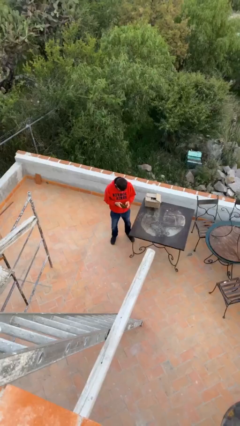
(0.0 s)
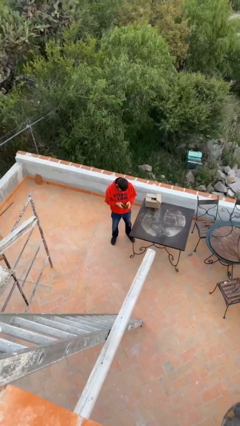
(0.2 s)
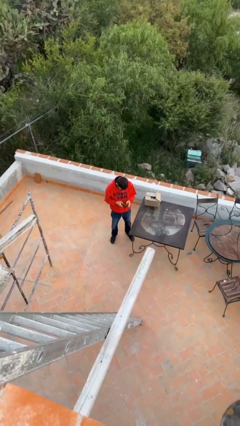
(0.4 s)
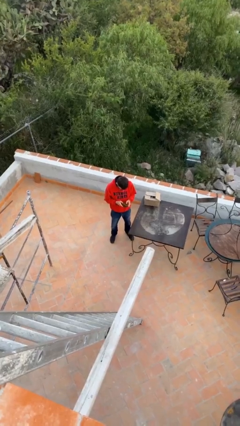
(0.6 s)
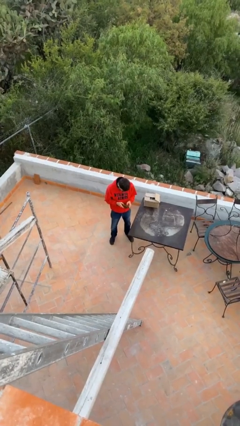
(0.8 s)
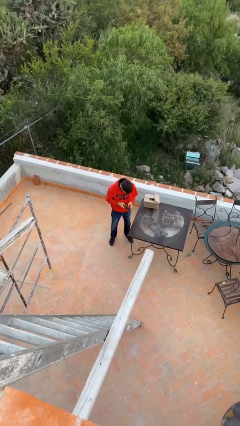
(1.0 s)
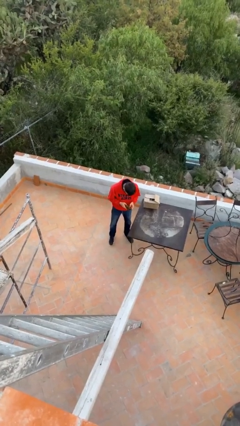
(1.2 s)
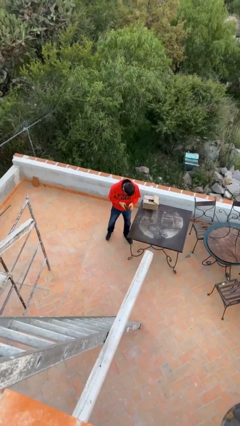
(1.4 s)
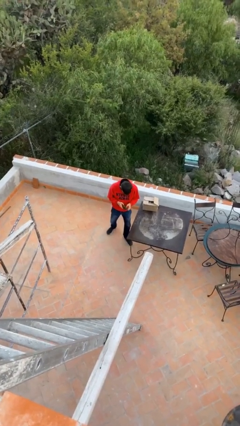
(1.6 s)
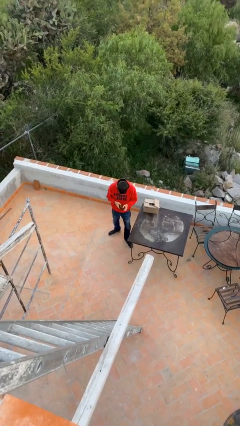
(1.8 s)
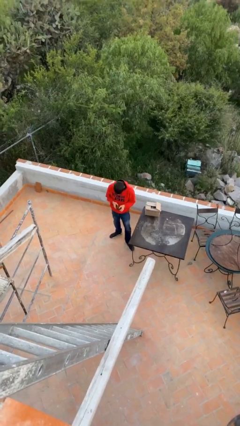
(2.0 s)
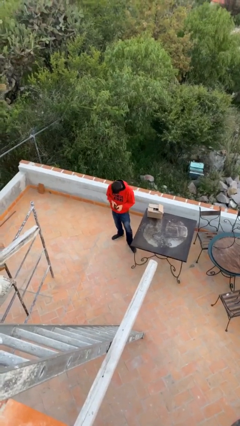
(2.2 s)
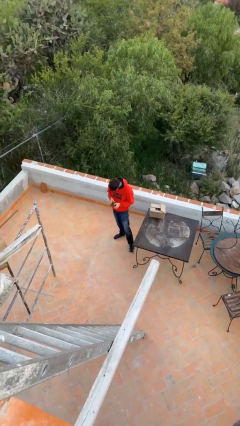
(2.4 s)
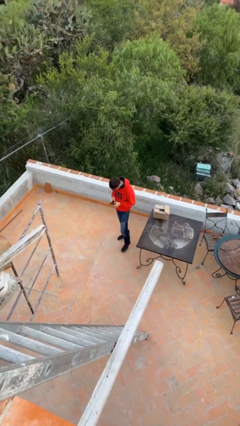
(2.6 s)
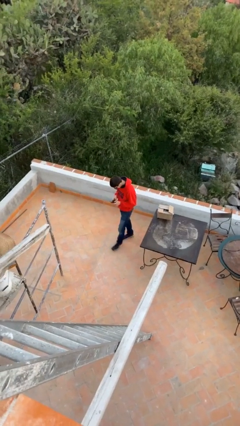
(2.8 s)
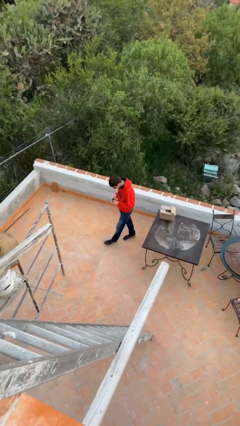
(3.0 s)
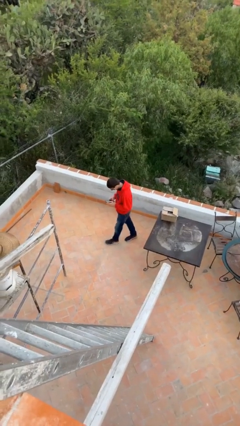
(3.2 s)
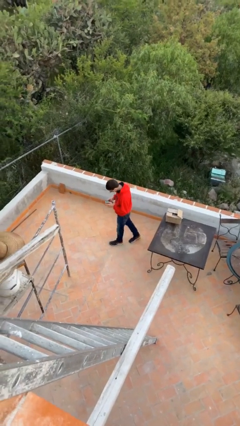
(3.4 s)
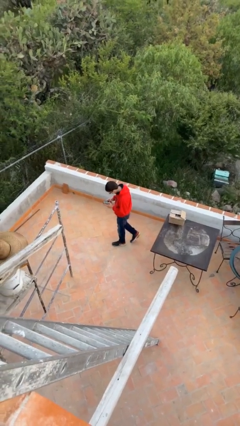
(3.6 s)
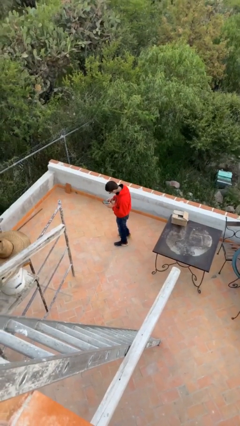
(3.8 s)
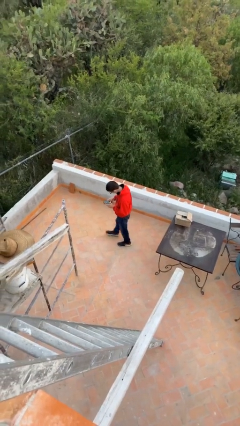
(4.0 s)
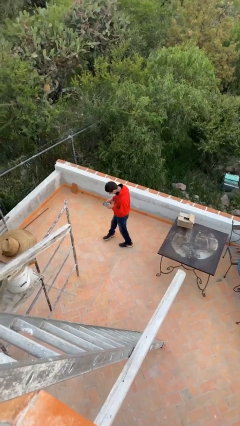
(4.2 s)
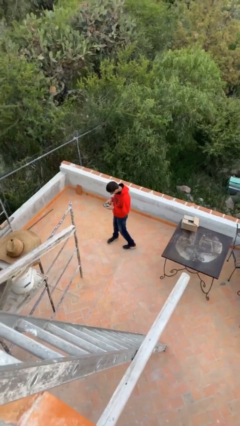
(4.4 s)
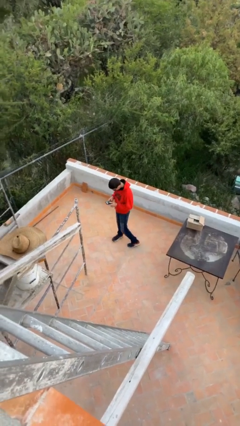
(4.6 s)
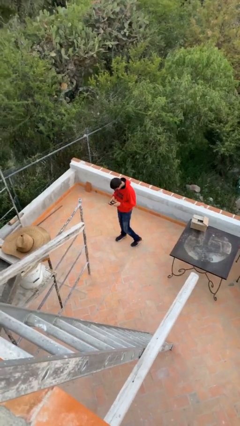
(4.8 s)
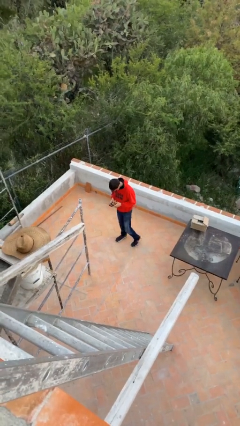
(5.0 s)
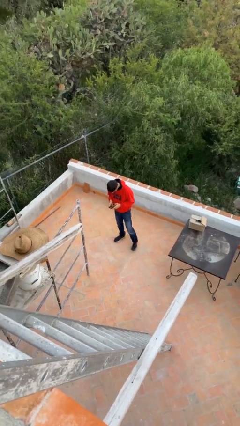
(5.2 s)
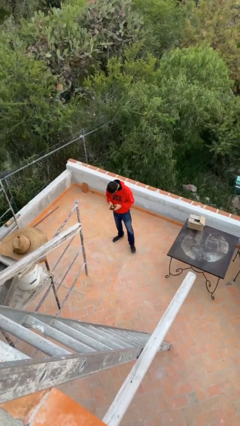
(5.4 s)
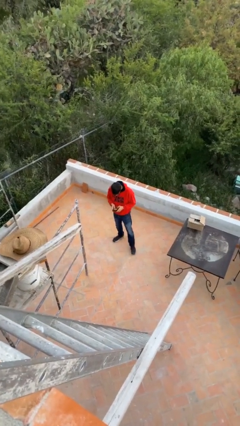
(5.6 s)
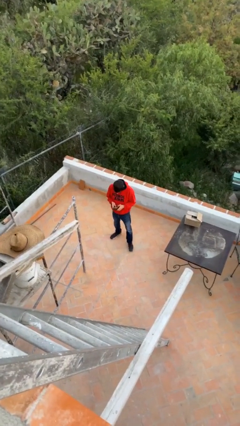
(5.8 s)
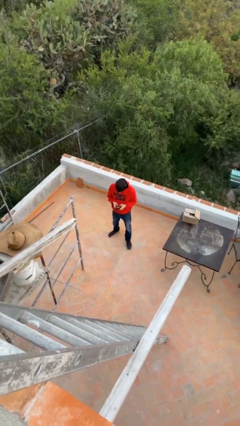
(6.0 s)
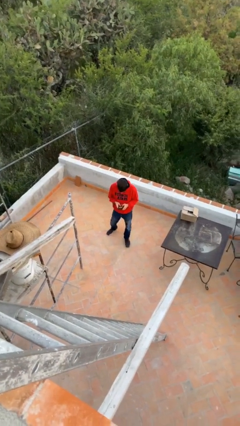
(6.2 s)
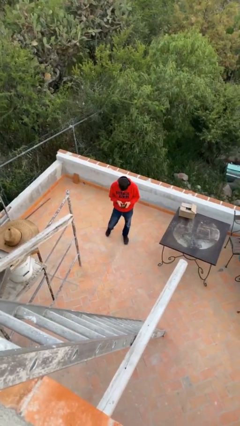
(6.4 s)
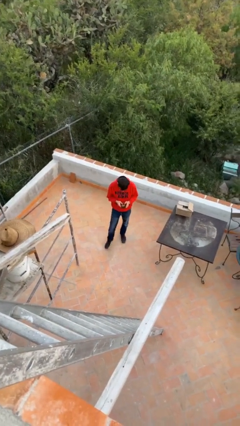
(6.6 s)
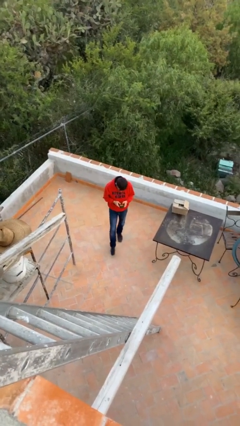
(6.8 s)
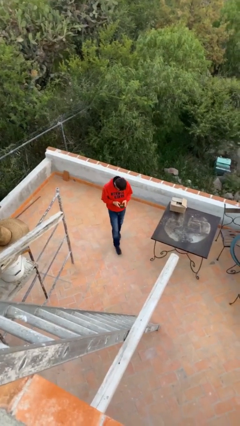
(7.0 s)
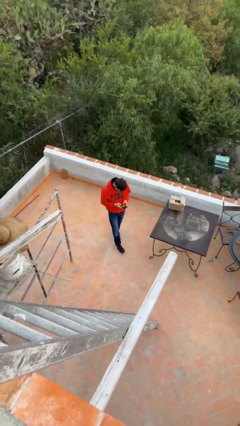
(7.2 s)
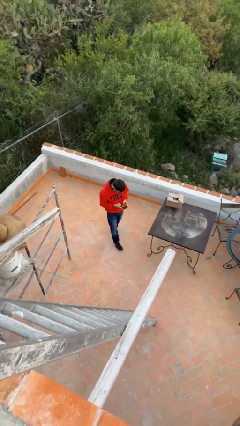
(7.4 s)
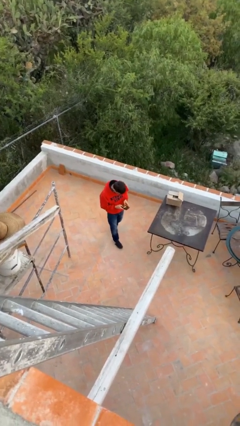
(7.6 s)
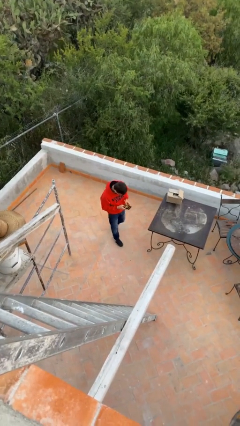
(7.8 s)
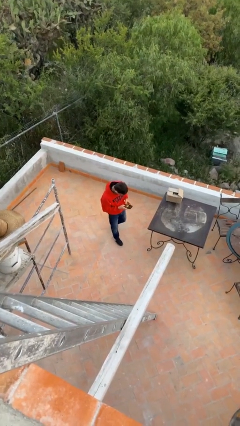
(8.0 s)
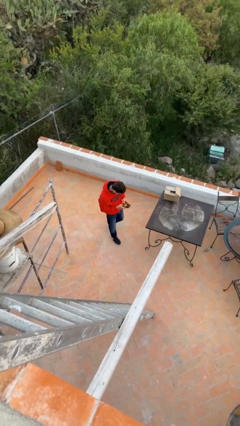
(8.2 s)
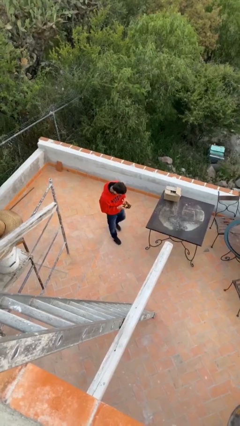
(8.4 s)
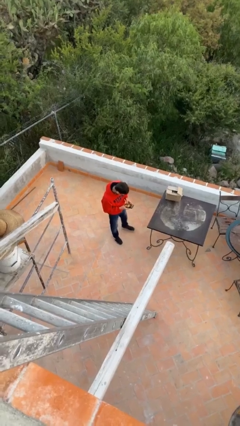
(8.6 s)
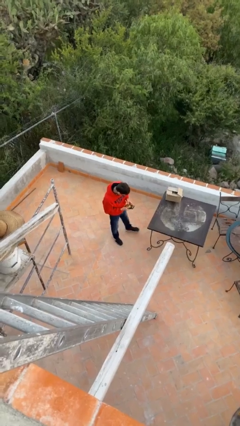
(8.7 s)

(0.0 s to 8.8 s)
person texts on phone

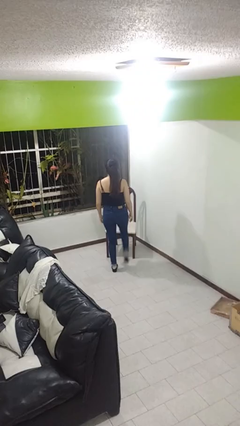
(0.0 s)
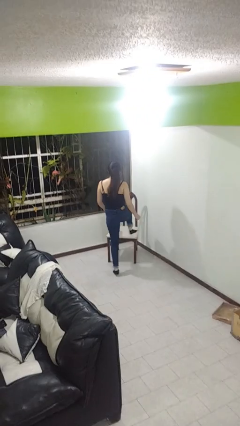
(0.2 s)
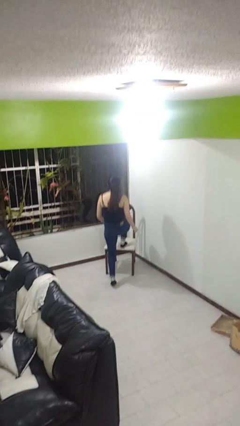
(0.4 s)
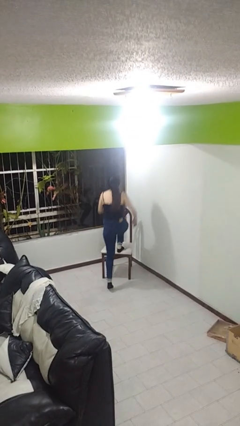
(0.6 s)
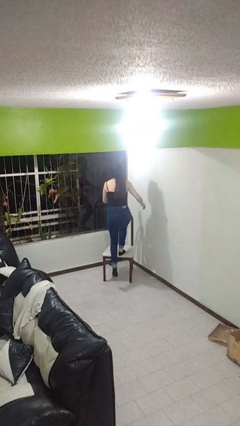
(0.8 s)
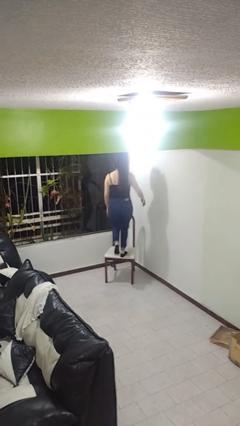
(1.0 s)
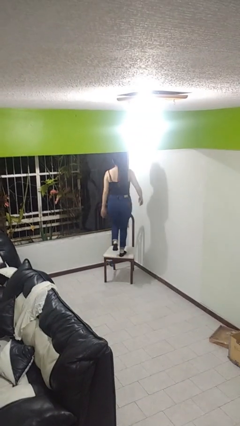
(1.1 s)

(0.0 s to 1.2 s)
person climbs on chair

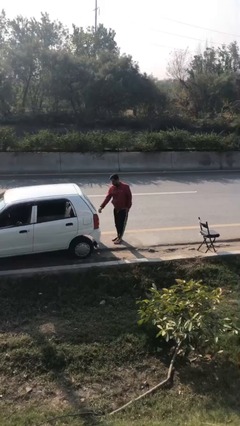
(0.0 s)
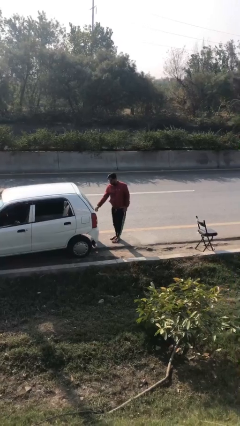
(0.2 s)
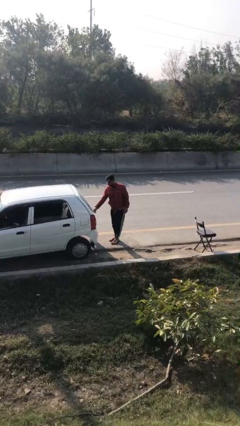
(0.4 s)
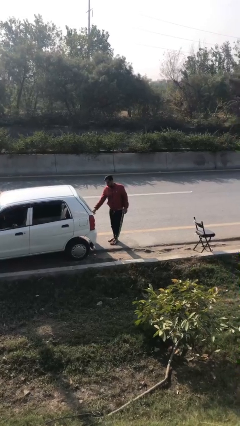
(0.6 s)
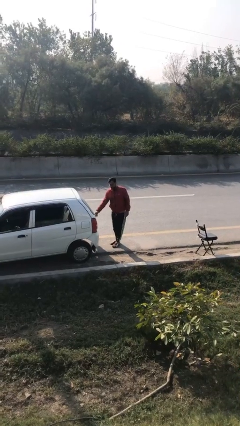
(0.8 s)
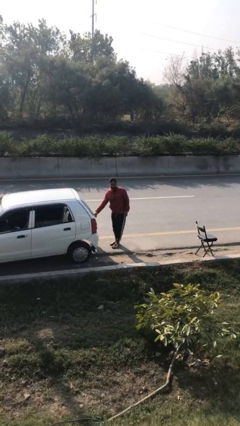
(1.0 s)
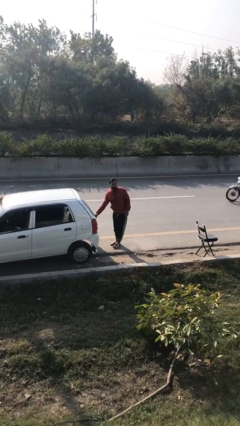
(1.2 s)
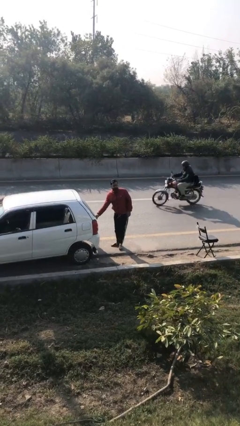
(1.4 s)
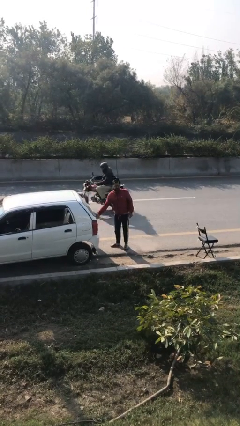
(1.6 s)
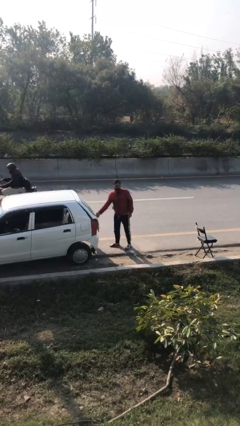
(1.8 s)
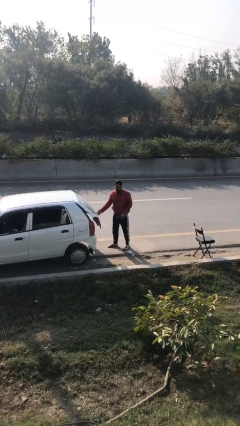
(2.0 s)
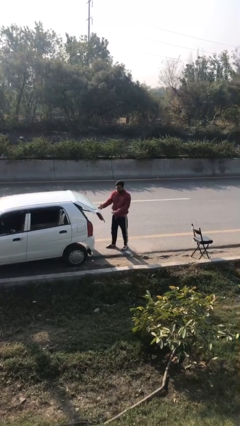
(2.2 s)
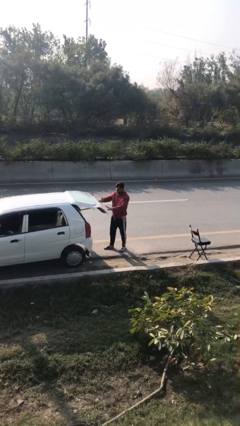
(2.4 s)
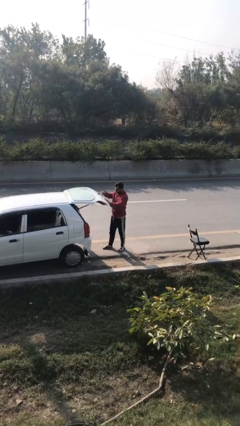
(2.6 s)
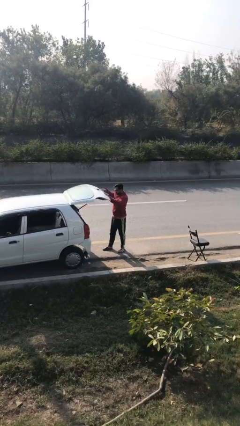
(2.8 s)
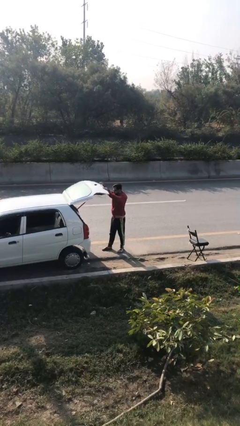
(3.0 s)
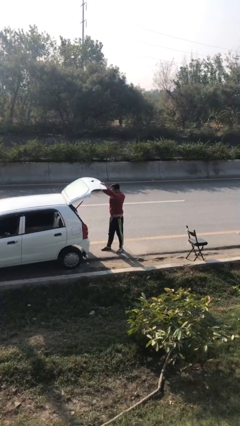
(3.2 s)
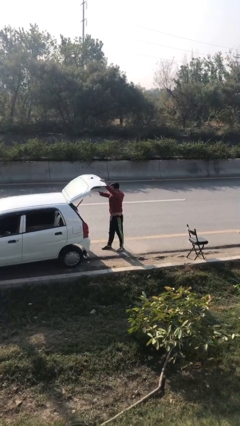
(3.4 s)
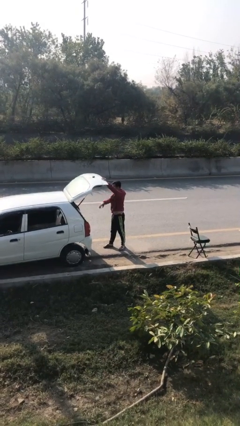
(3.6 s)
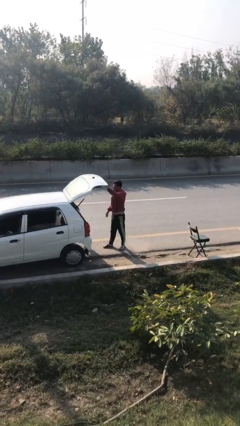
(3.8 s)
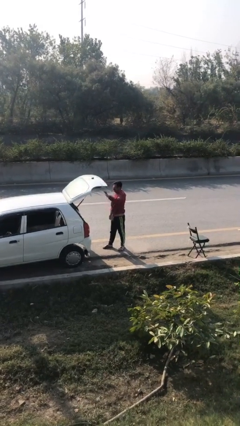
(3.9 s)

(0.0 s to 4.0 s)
person opens car trunk

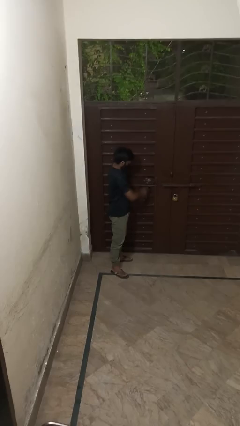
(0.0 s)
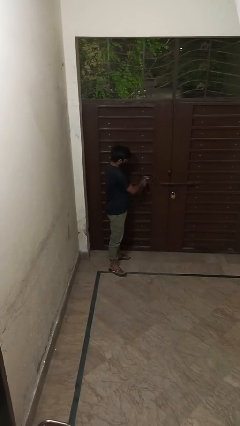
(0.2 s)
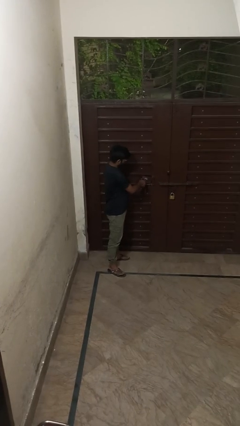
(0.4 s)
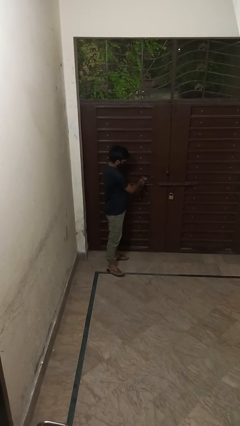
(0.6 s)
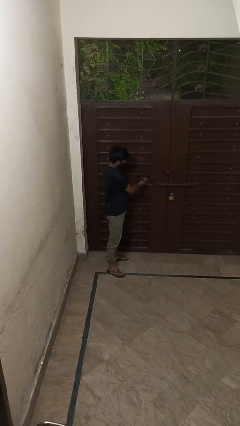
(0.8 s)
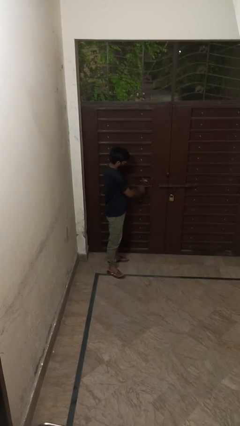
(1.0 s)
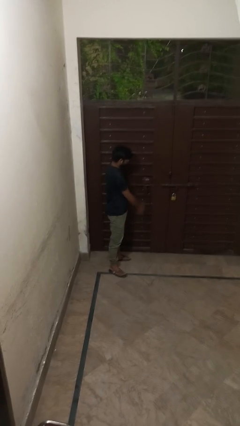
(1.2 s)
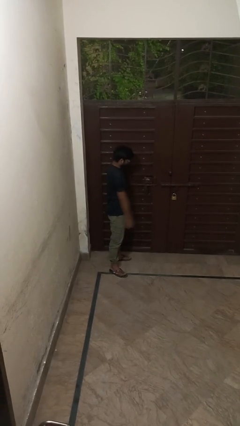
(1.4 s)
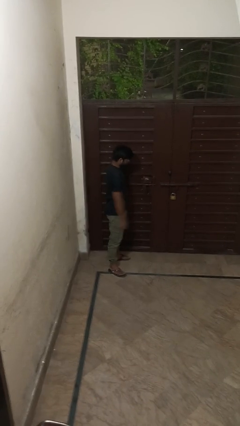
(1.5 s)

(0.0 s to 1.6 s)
person locks door with keys

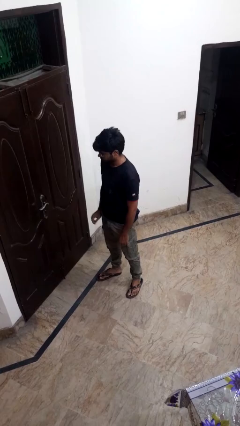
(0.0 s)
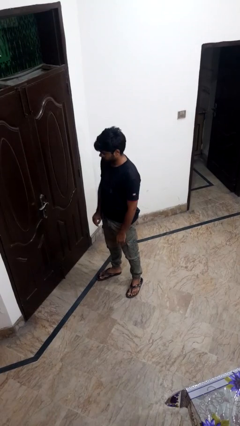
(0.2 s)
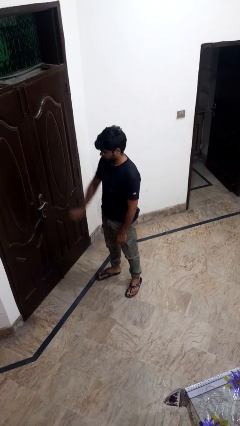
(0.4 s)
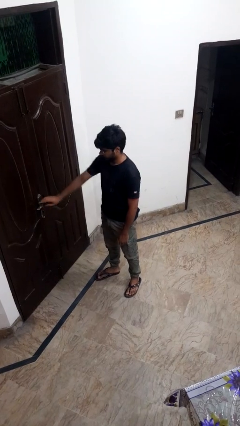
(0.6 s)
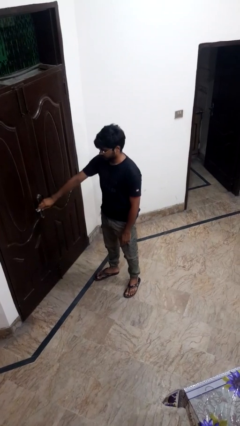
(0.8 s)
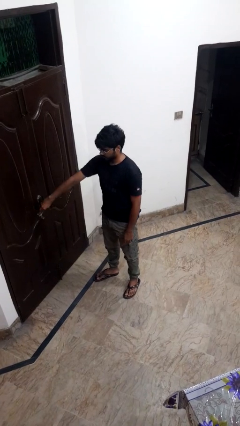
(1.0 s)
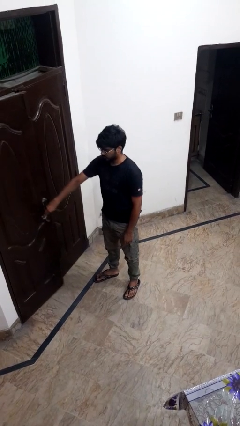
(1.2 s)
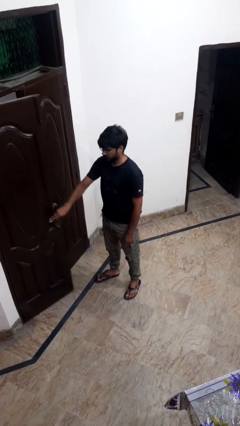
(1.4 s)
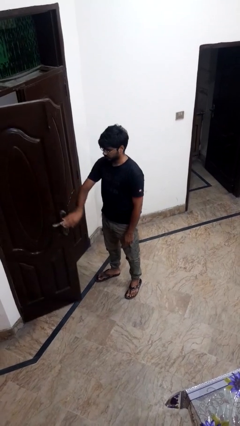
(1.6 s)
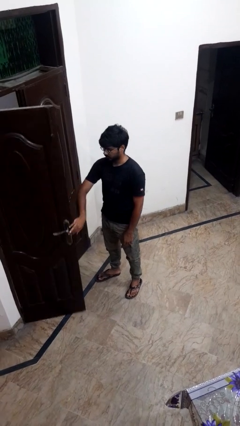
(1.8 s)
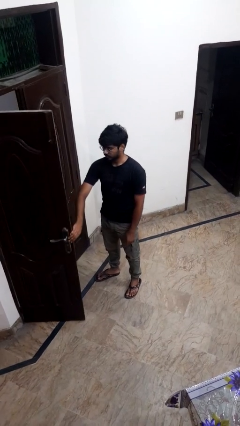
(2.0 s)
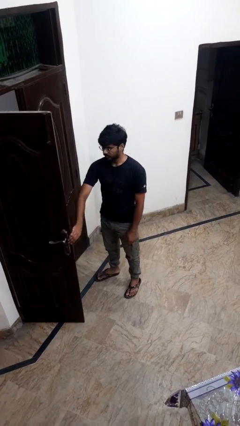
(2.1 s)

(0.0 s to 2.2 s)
person opens facility door
